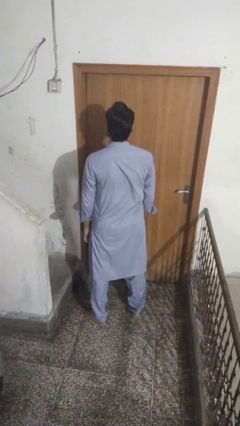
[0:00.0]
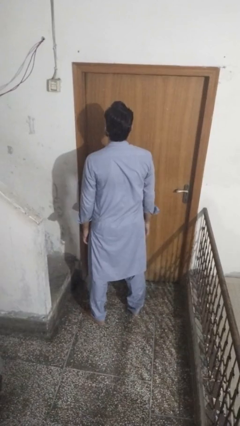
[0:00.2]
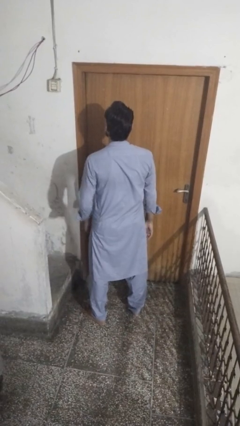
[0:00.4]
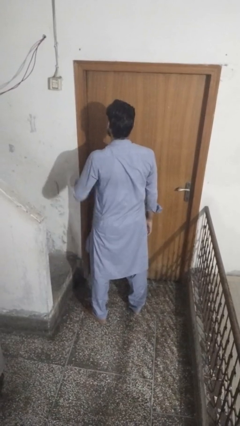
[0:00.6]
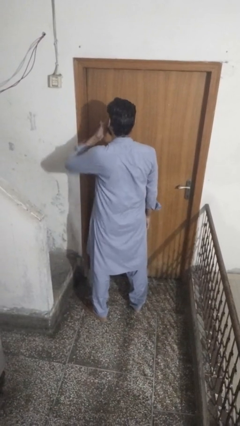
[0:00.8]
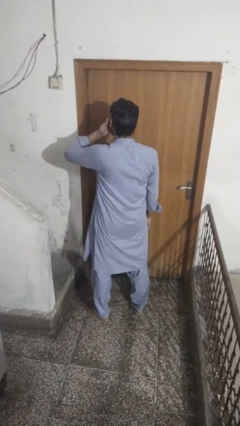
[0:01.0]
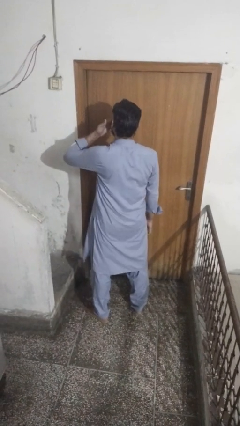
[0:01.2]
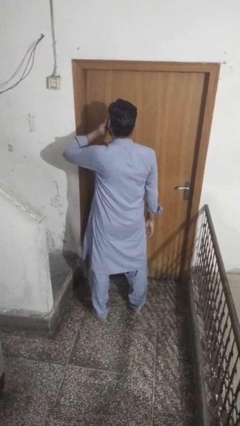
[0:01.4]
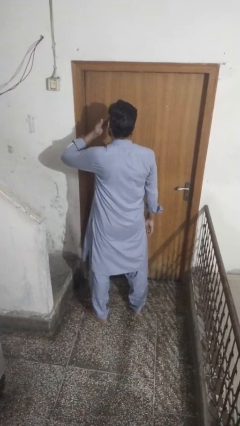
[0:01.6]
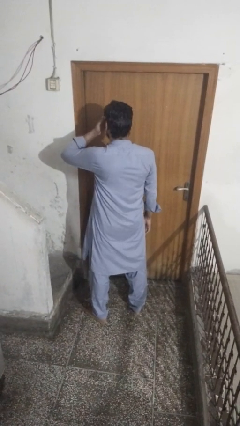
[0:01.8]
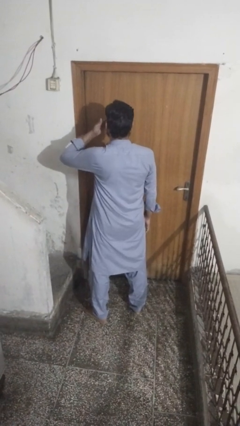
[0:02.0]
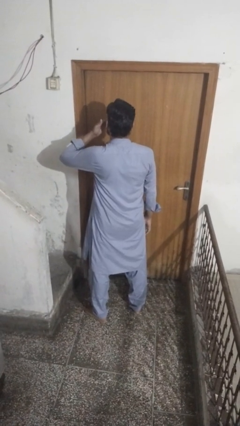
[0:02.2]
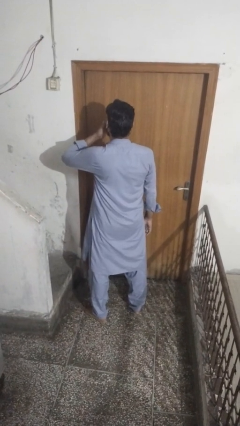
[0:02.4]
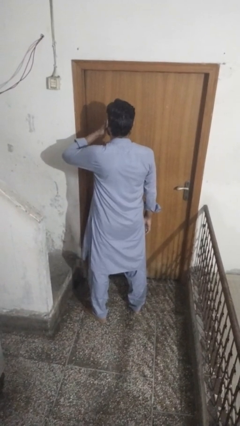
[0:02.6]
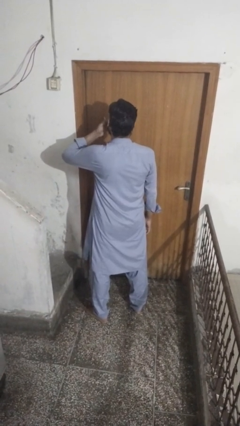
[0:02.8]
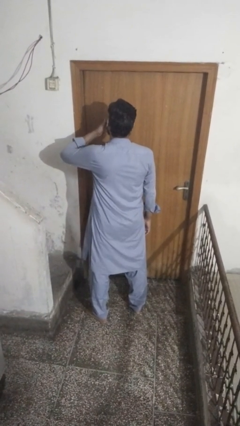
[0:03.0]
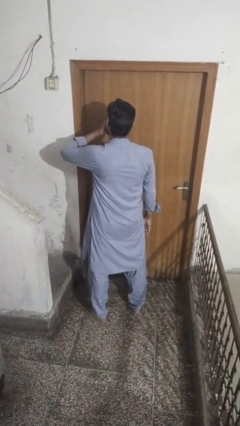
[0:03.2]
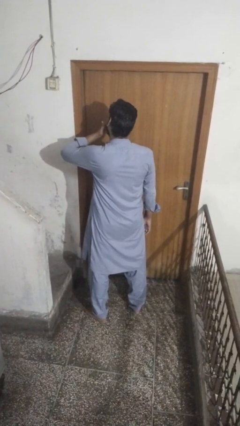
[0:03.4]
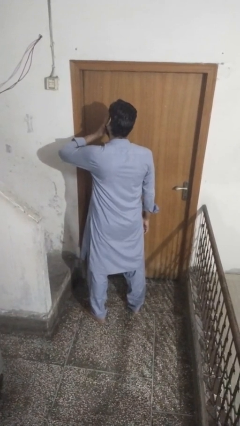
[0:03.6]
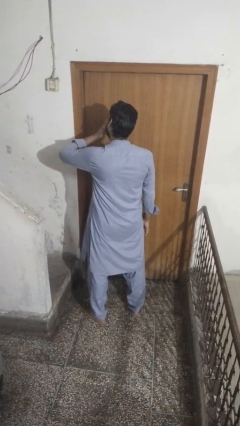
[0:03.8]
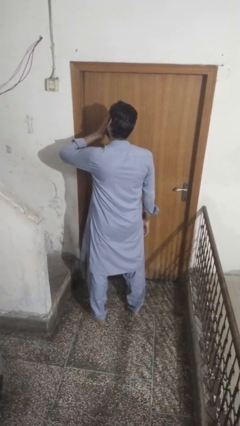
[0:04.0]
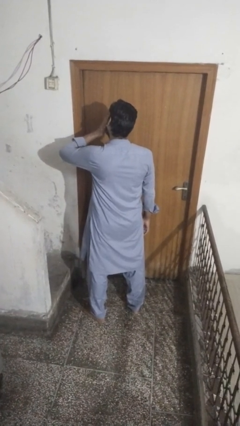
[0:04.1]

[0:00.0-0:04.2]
person rubs eyes

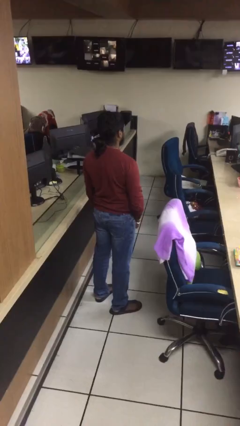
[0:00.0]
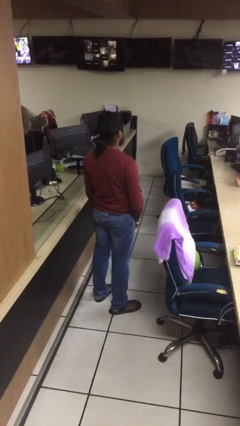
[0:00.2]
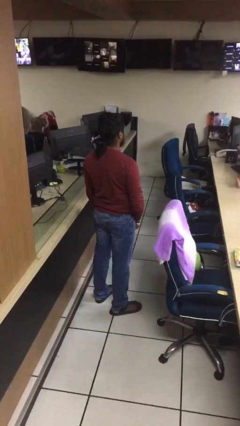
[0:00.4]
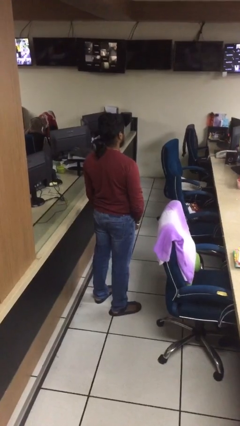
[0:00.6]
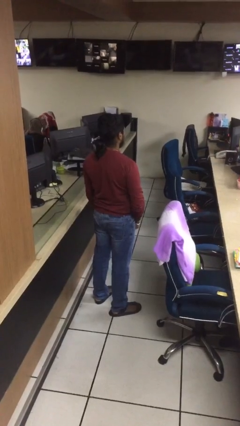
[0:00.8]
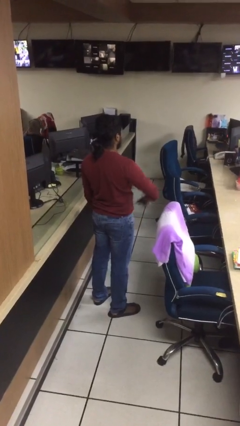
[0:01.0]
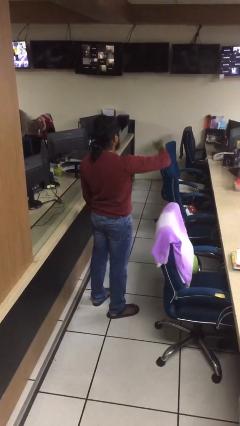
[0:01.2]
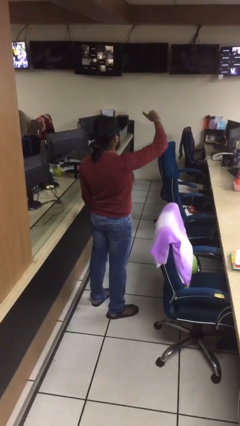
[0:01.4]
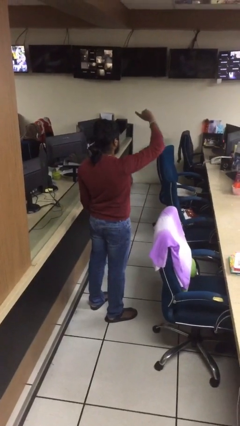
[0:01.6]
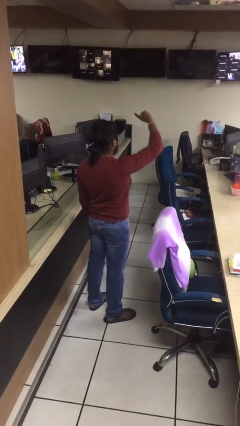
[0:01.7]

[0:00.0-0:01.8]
person gestures swipe up

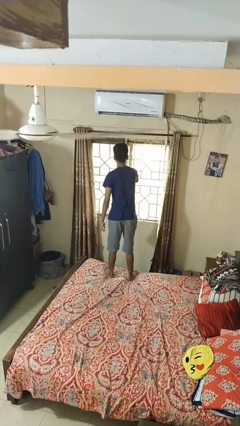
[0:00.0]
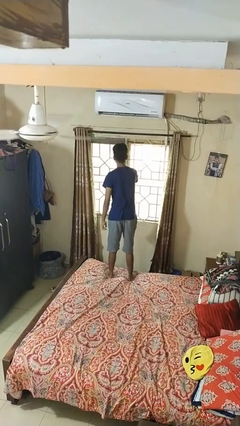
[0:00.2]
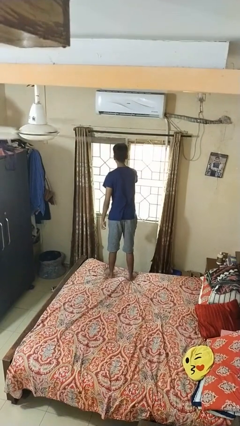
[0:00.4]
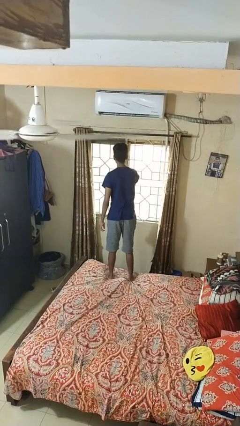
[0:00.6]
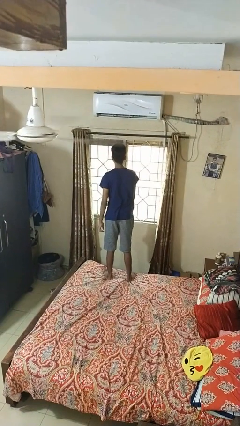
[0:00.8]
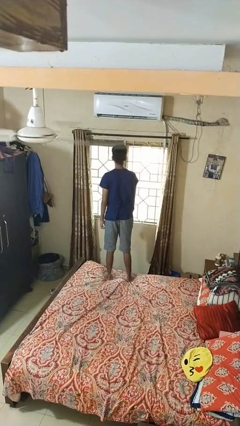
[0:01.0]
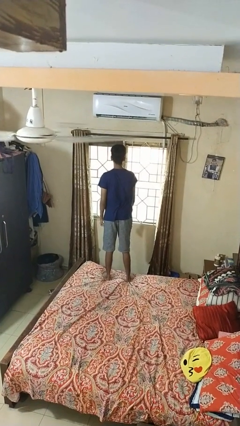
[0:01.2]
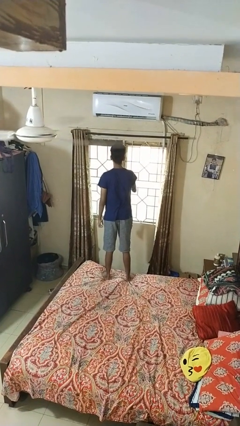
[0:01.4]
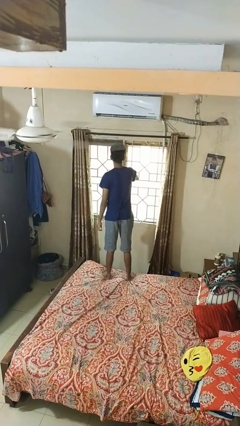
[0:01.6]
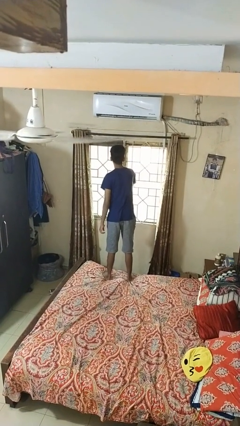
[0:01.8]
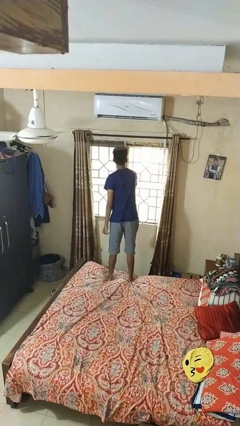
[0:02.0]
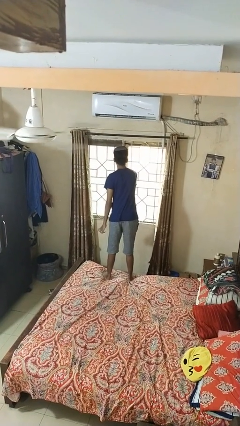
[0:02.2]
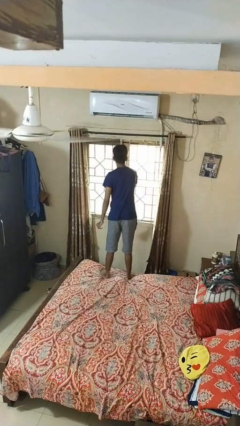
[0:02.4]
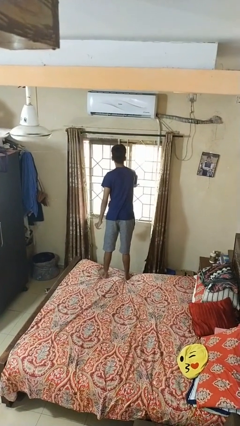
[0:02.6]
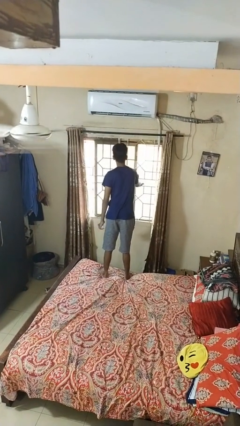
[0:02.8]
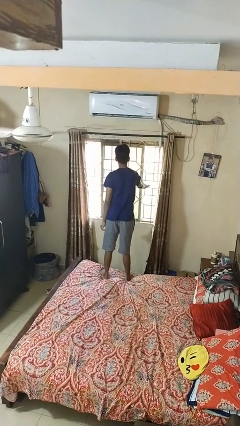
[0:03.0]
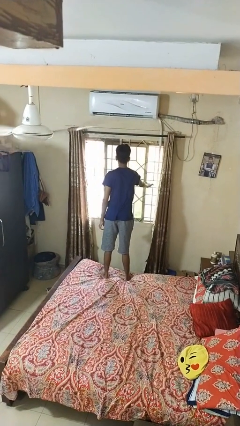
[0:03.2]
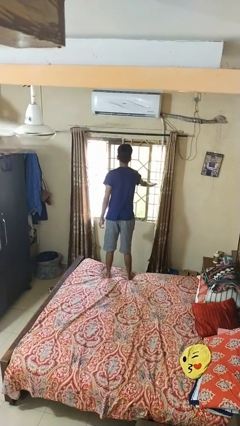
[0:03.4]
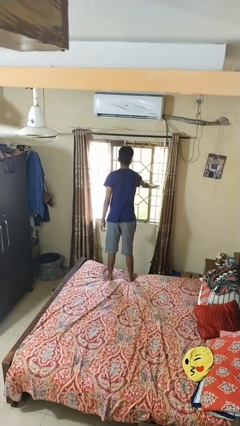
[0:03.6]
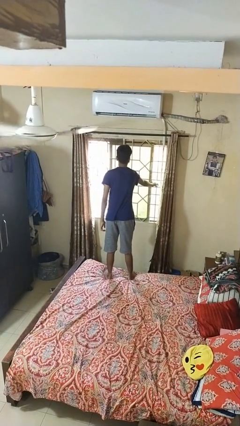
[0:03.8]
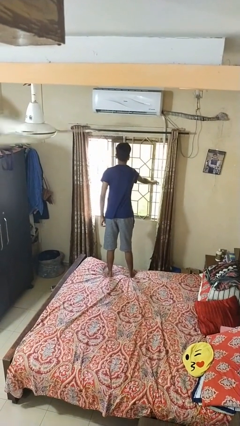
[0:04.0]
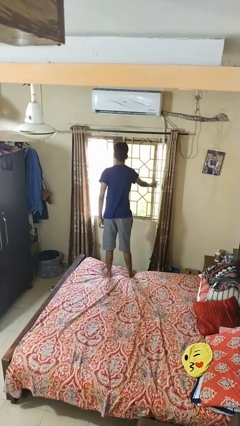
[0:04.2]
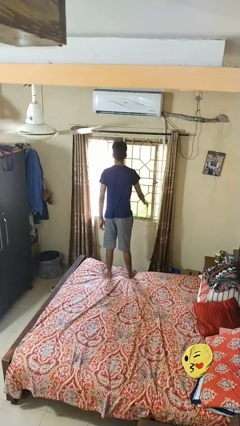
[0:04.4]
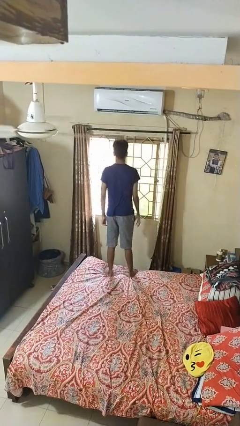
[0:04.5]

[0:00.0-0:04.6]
person opens home window

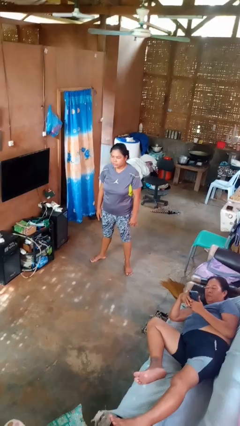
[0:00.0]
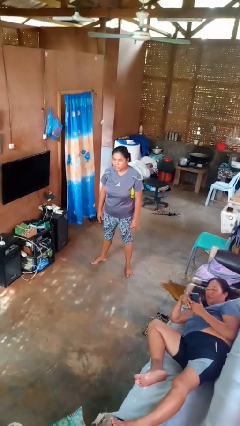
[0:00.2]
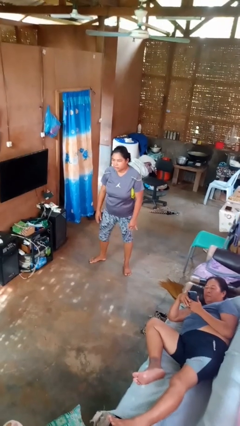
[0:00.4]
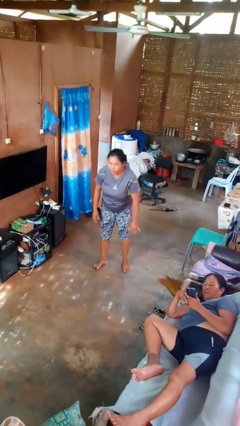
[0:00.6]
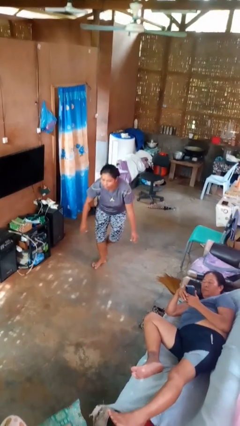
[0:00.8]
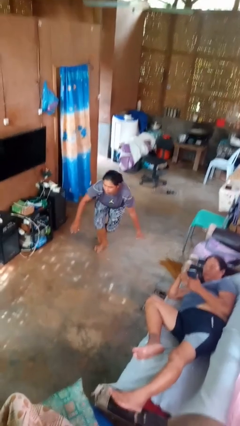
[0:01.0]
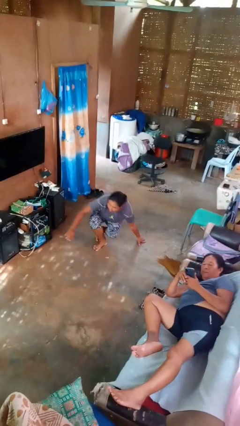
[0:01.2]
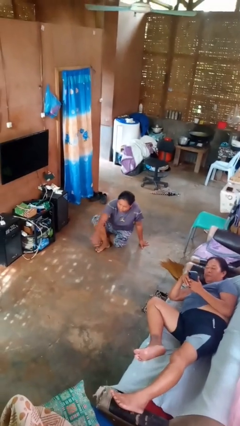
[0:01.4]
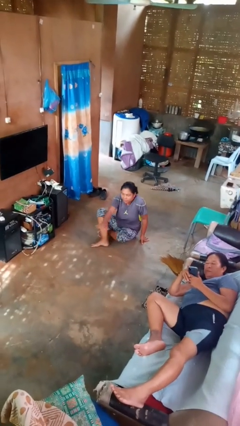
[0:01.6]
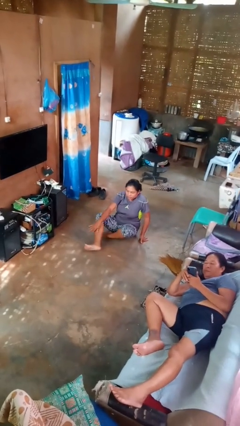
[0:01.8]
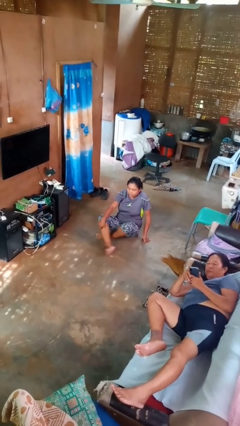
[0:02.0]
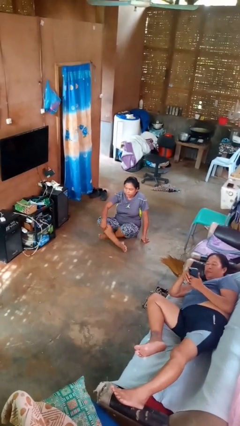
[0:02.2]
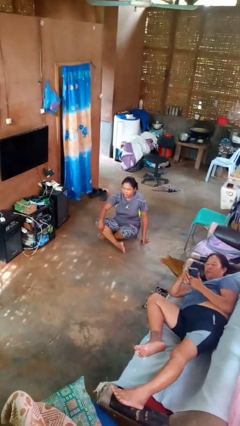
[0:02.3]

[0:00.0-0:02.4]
person sits crisscross

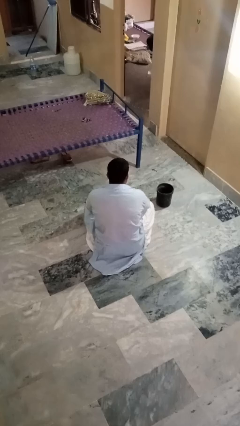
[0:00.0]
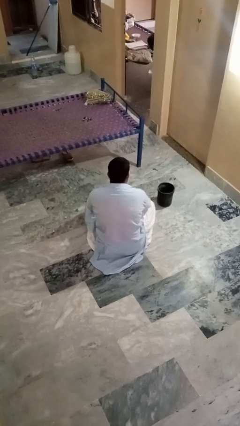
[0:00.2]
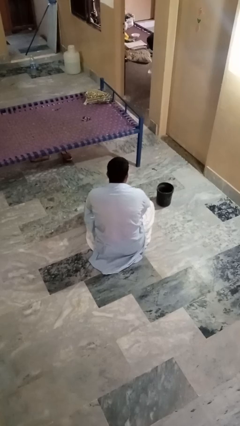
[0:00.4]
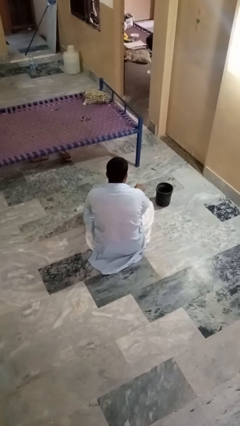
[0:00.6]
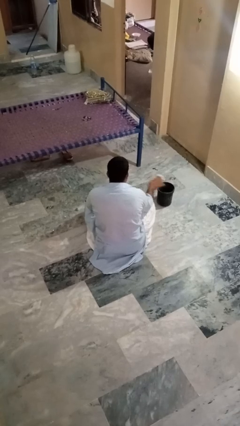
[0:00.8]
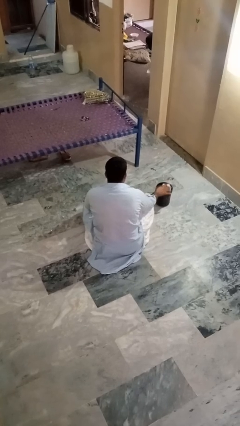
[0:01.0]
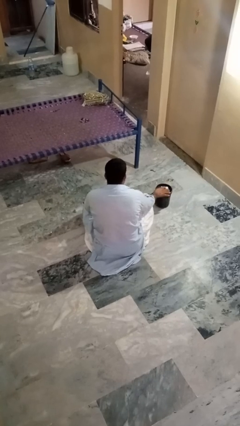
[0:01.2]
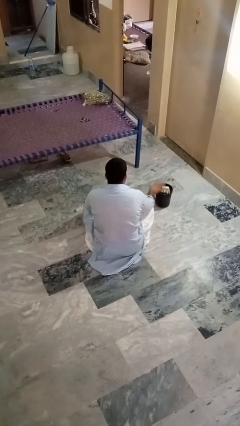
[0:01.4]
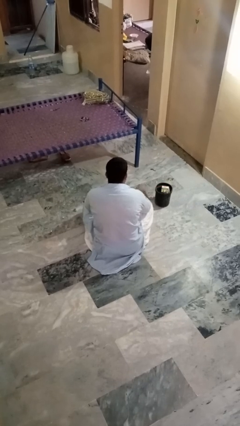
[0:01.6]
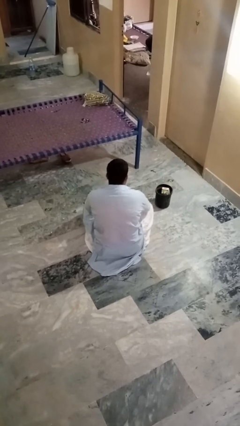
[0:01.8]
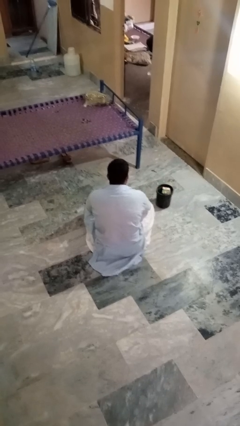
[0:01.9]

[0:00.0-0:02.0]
person puts object into basket

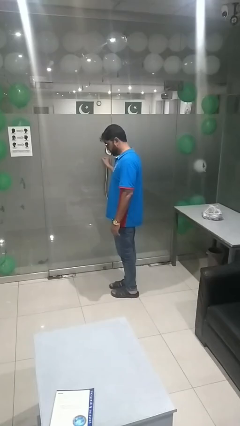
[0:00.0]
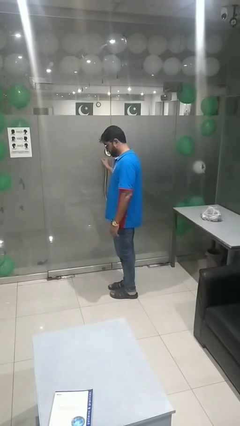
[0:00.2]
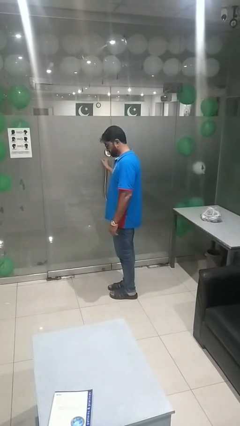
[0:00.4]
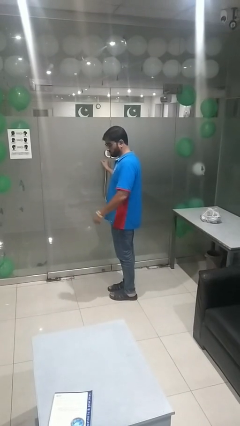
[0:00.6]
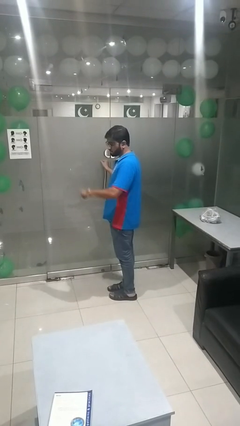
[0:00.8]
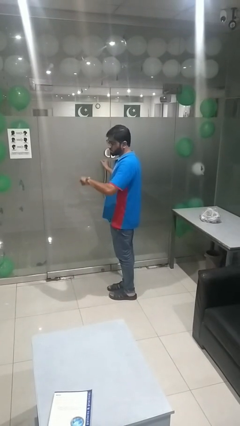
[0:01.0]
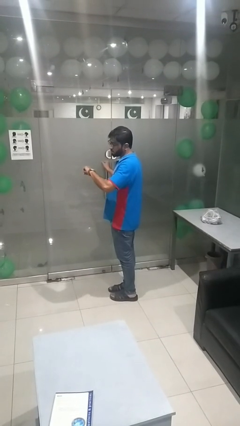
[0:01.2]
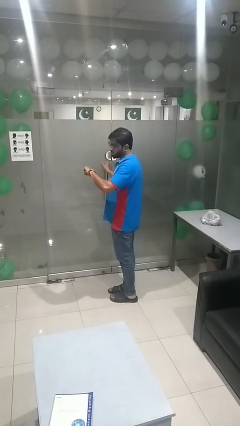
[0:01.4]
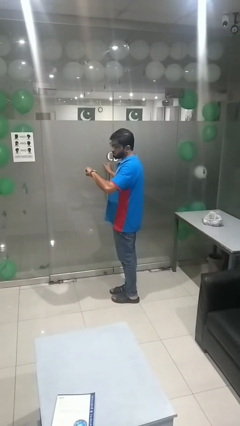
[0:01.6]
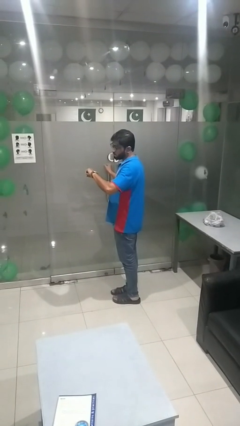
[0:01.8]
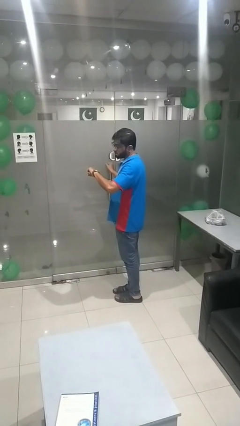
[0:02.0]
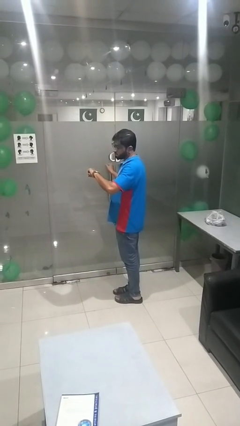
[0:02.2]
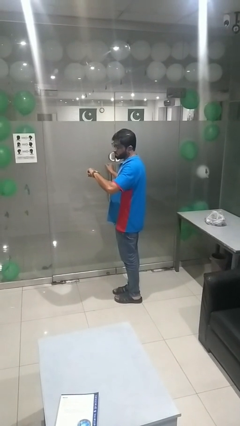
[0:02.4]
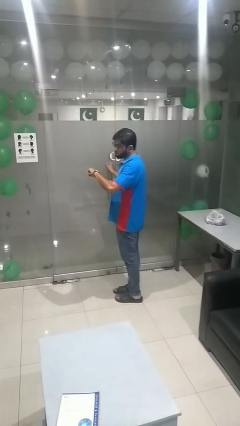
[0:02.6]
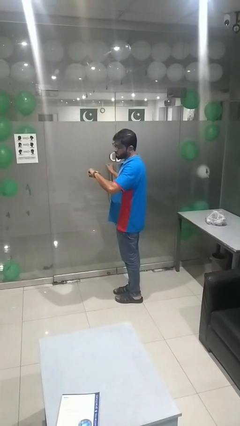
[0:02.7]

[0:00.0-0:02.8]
person looks at wristwatch
